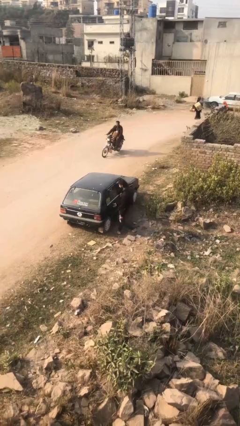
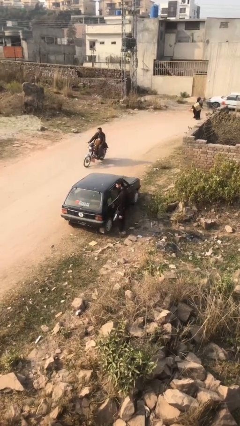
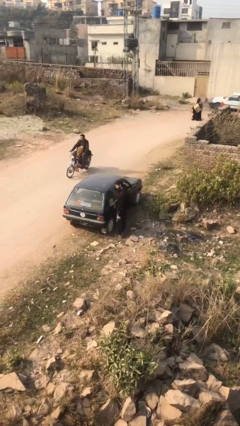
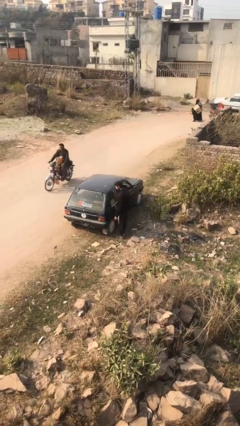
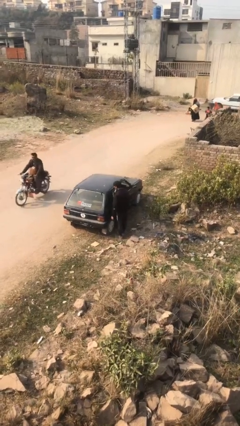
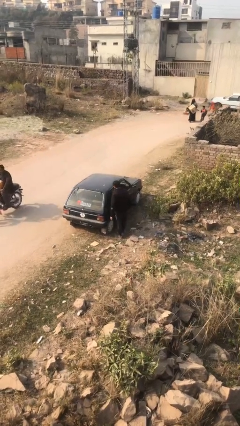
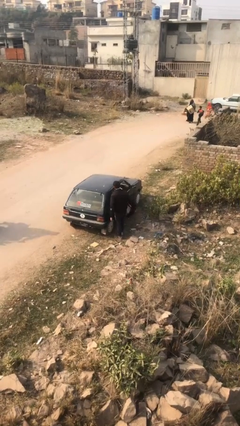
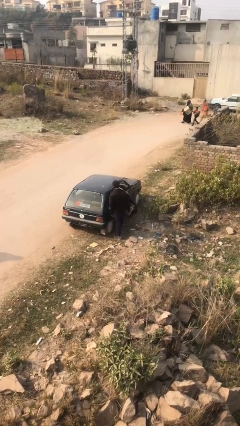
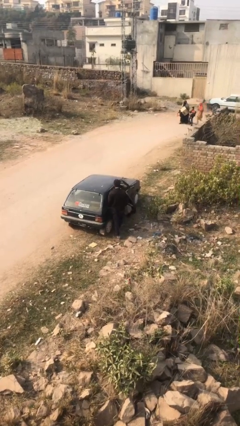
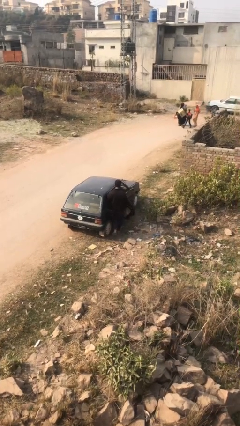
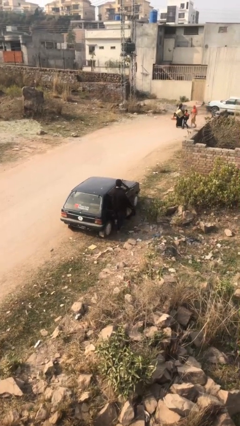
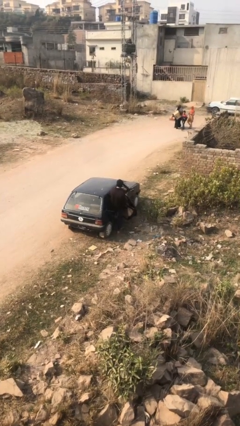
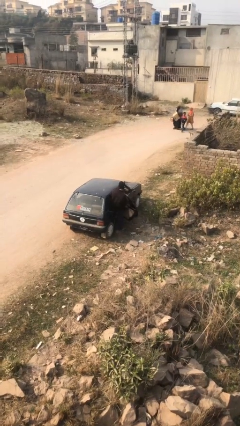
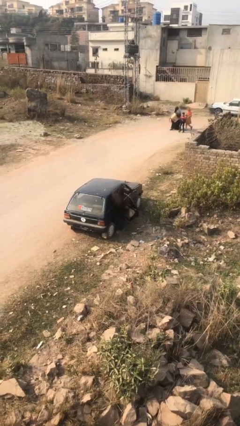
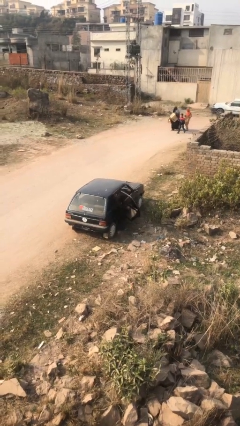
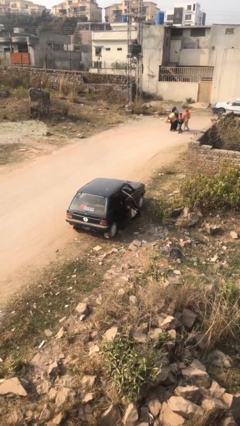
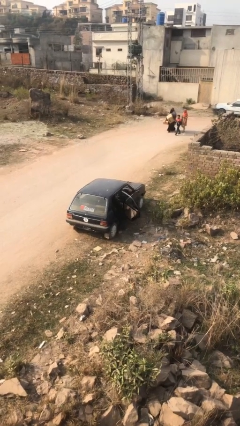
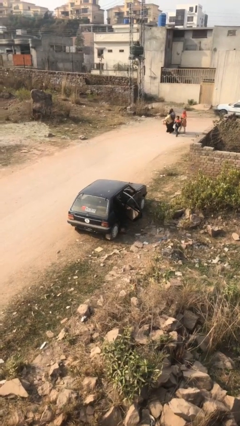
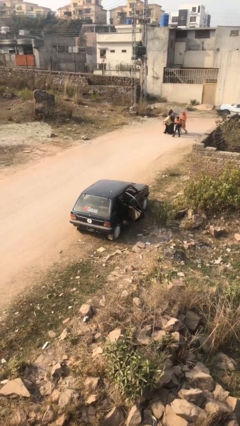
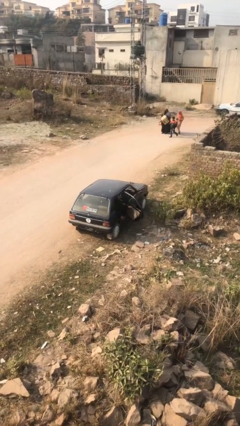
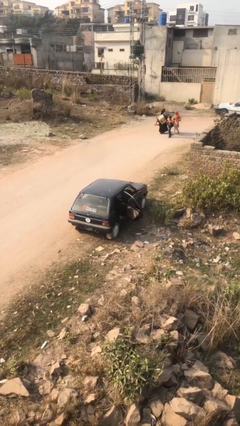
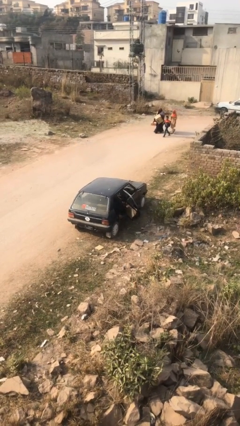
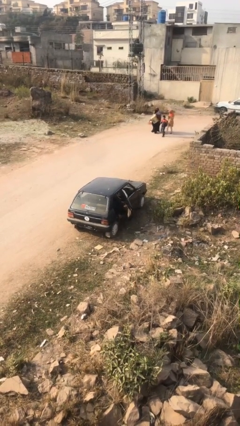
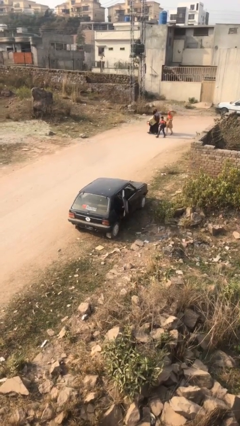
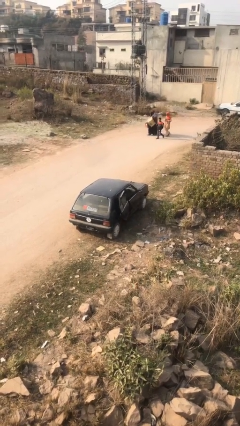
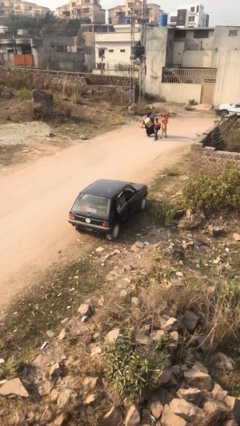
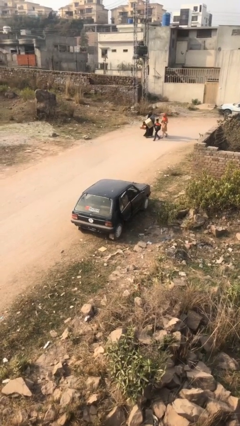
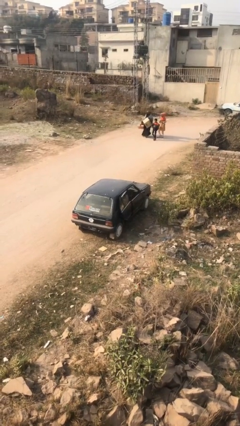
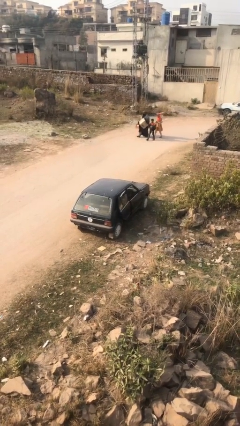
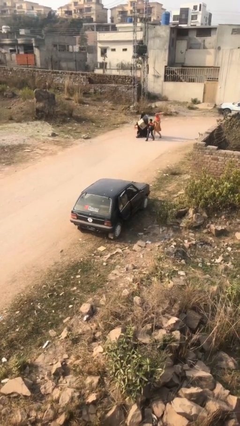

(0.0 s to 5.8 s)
car picks up person

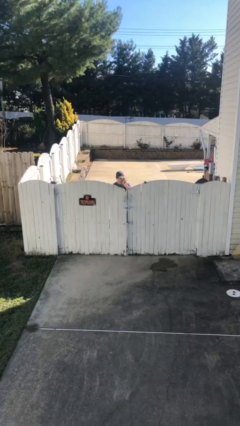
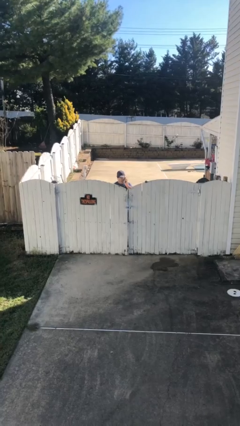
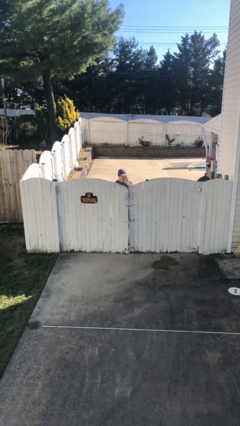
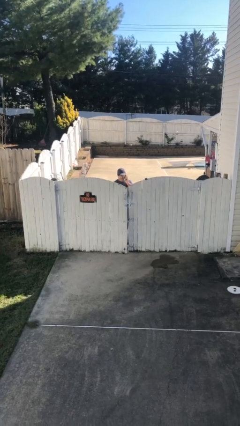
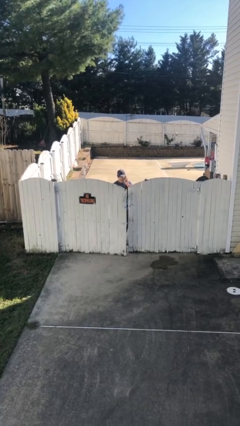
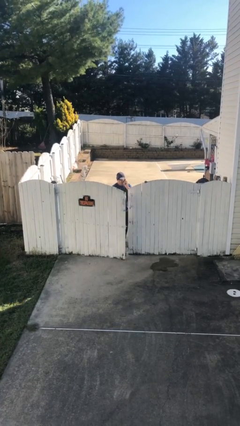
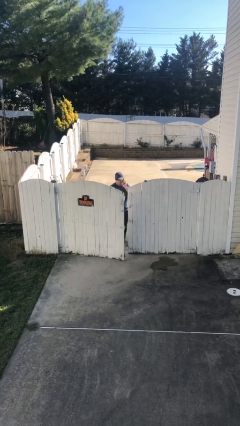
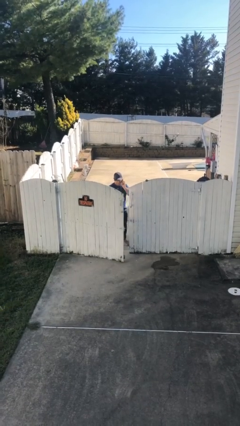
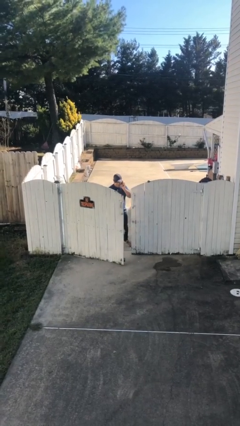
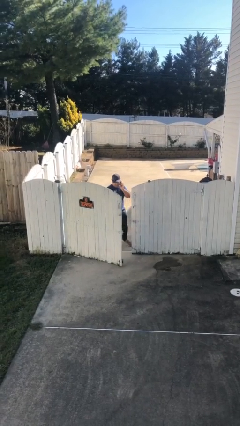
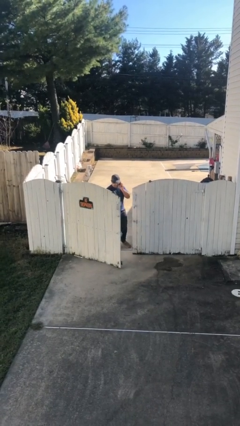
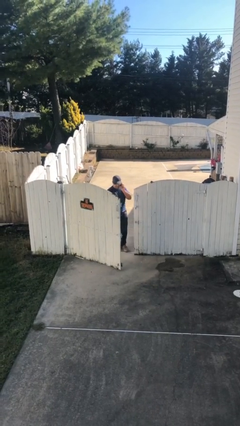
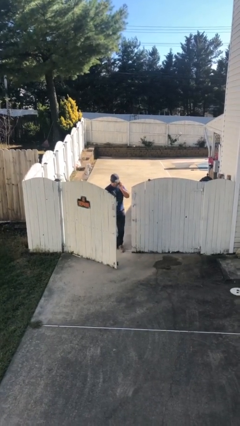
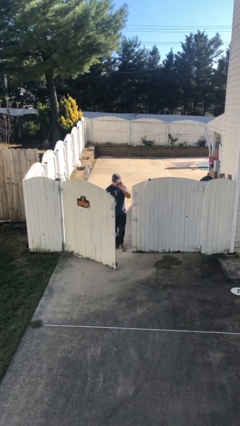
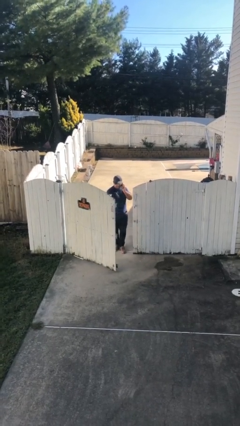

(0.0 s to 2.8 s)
person opens facility door

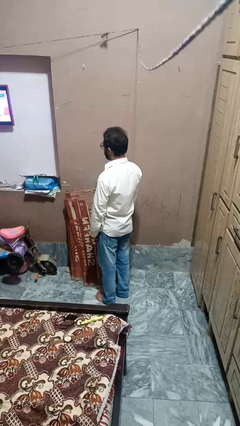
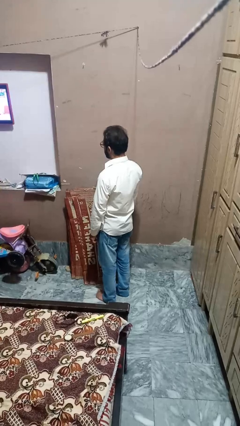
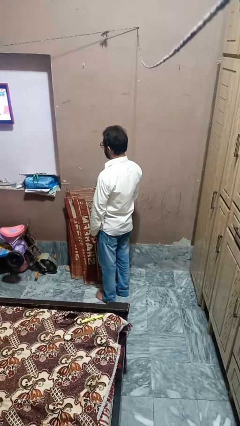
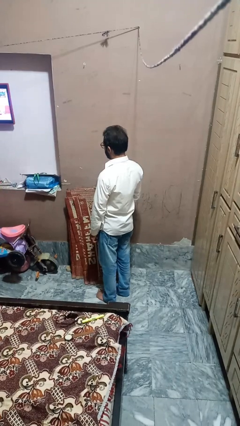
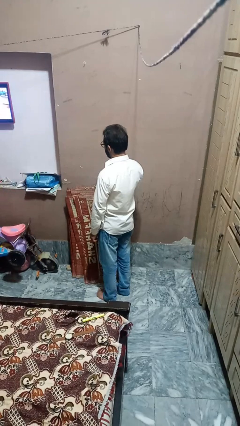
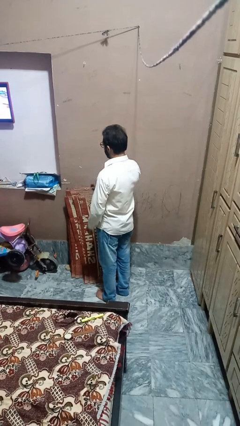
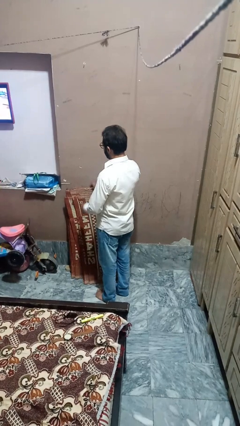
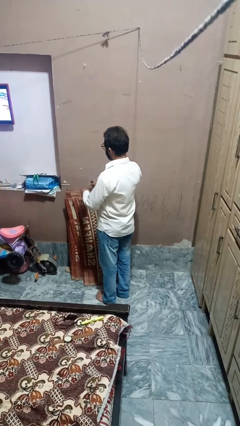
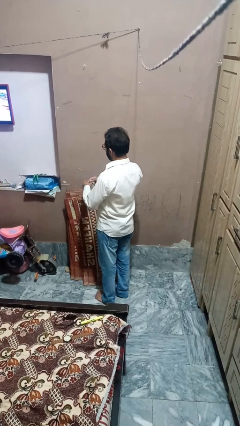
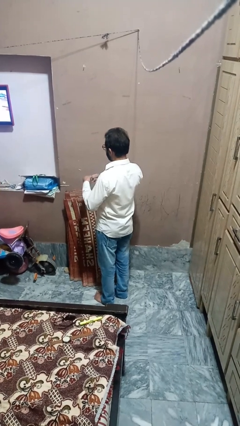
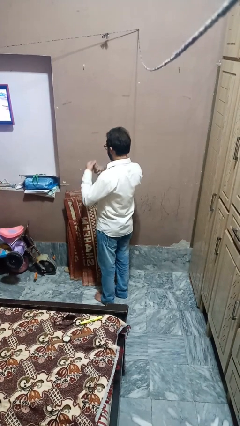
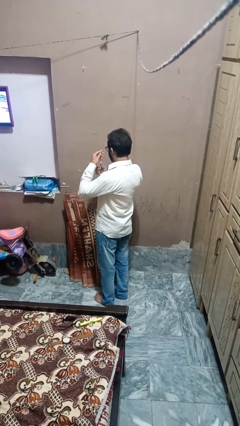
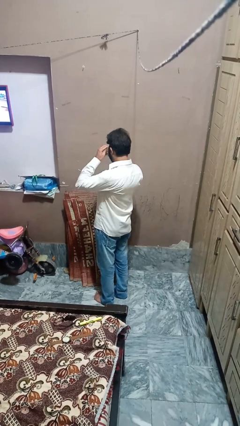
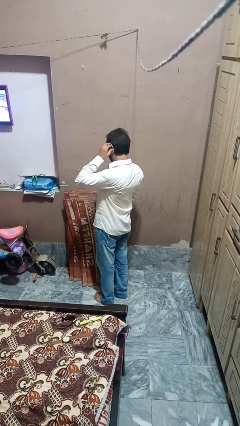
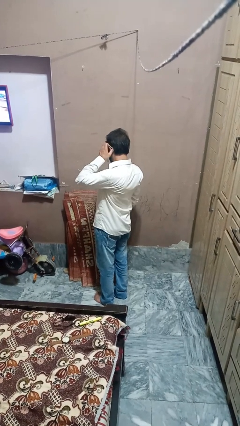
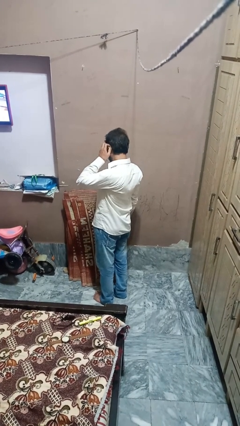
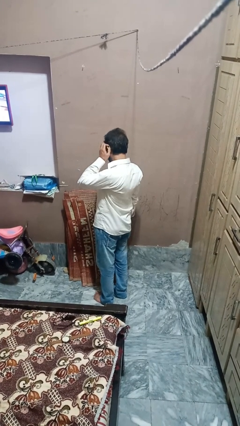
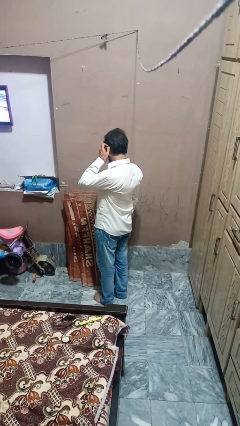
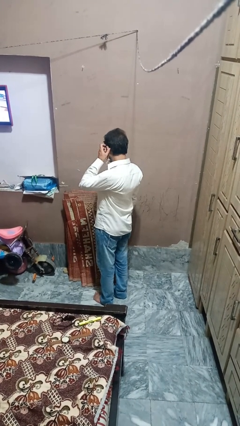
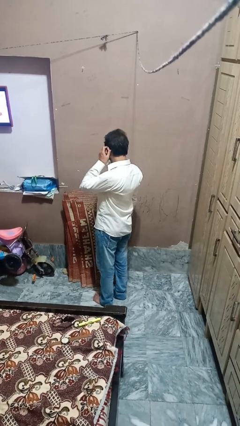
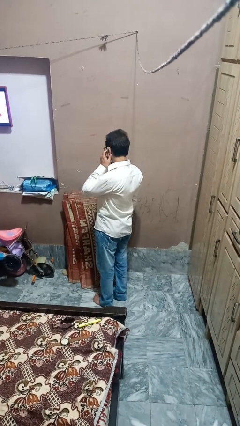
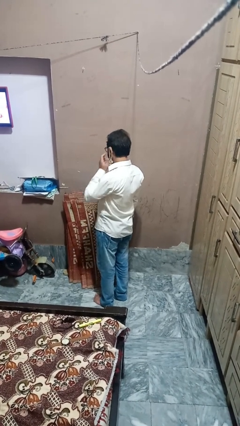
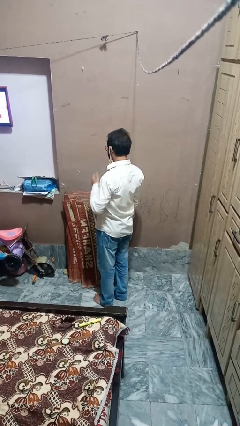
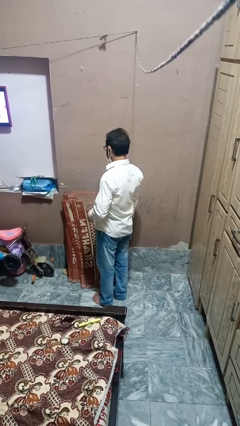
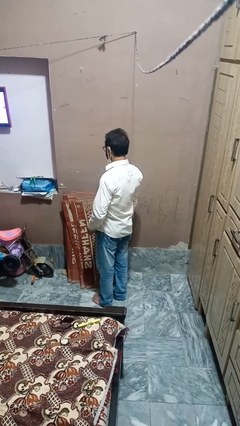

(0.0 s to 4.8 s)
person puts on earrings

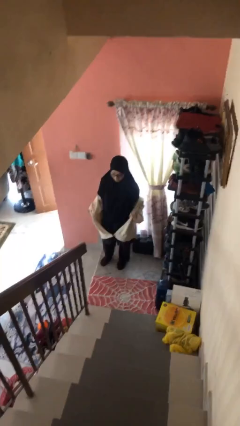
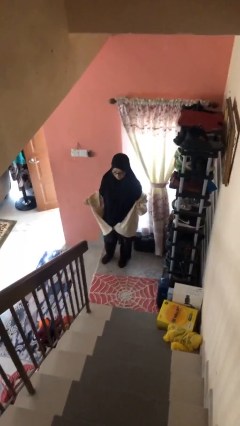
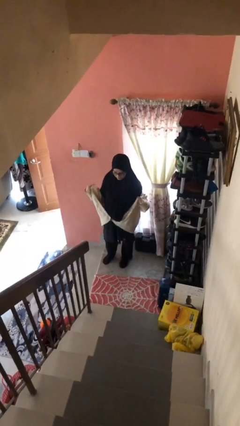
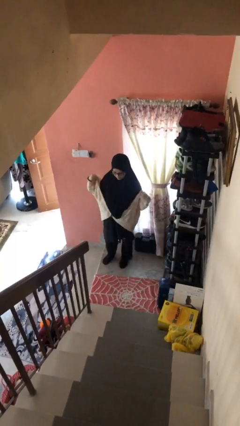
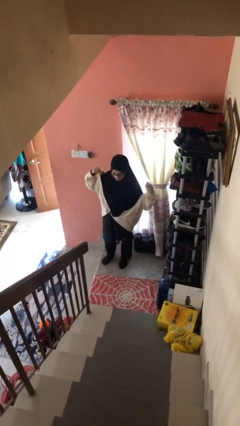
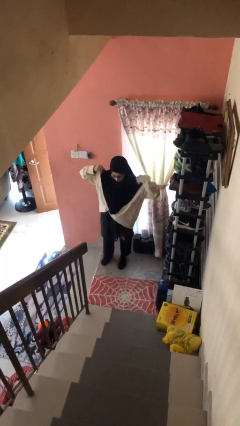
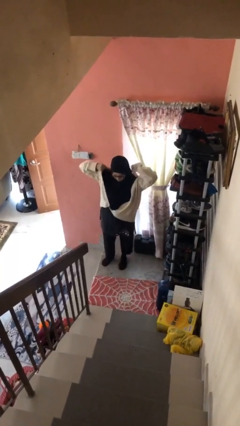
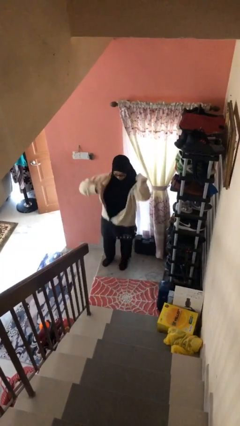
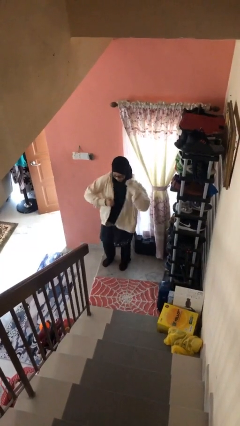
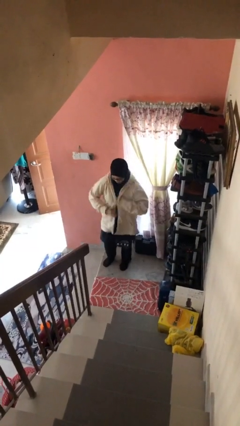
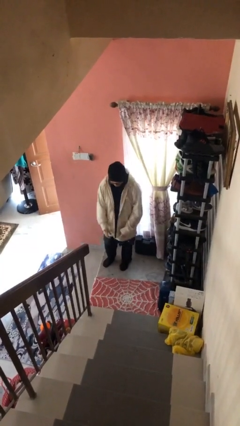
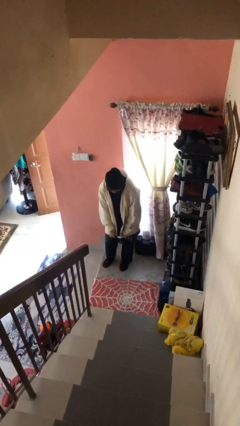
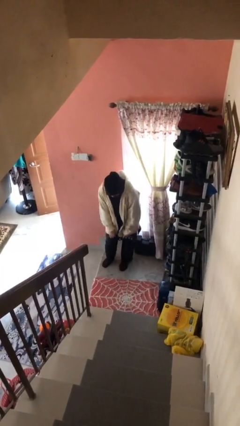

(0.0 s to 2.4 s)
person puts on jacket

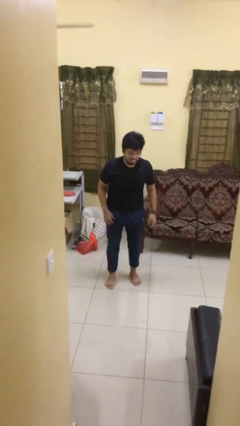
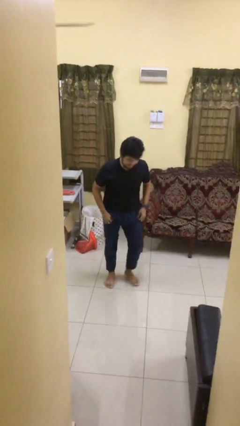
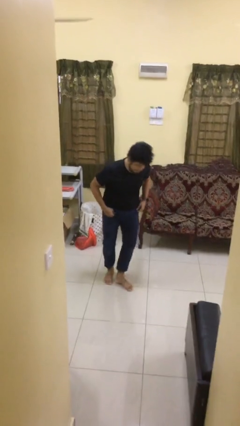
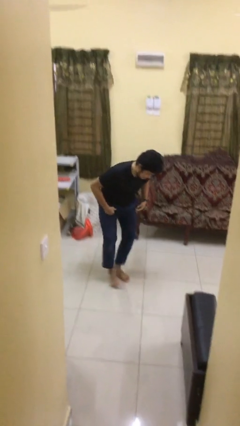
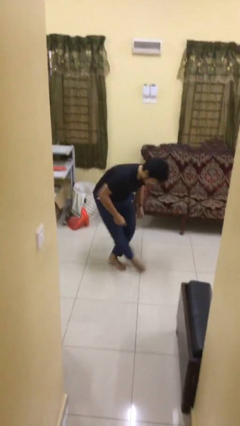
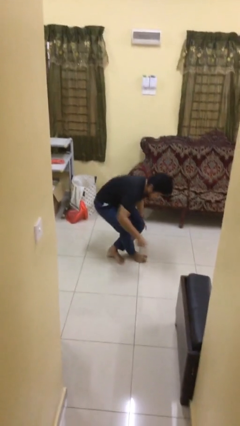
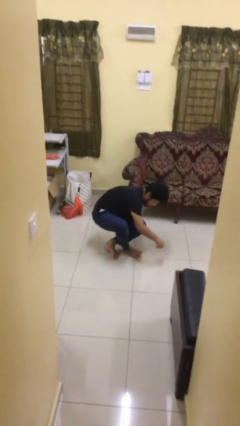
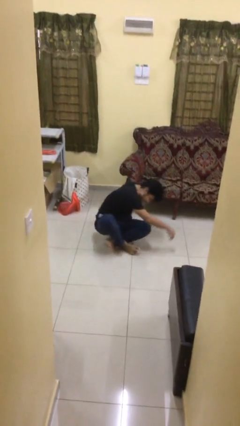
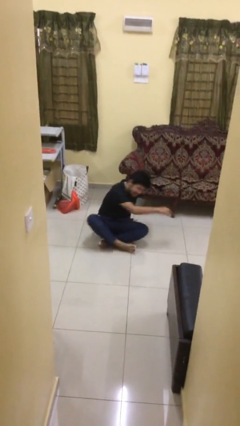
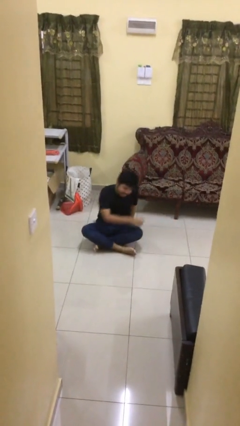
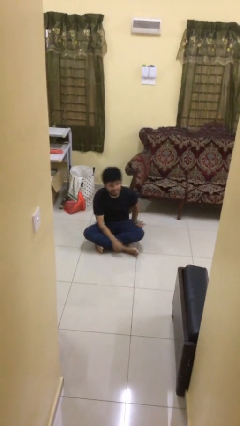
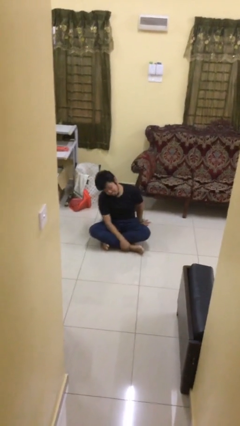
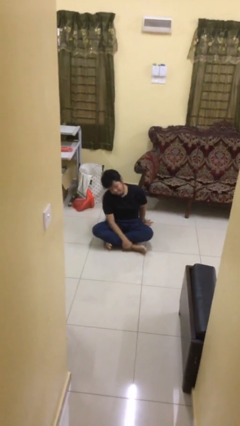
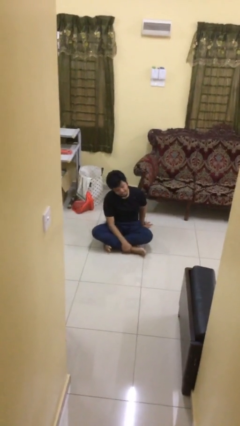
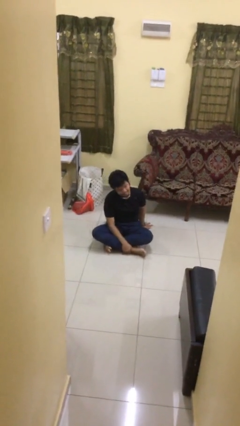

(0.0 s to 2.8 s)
person sits crisscross
